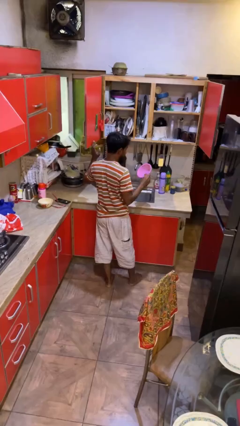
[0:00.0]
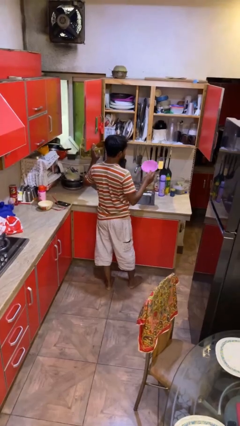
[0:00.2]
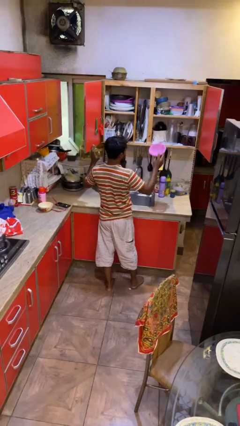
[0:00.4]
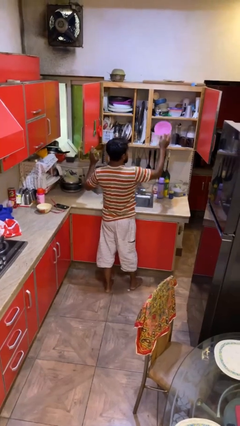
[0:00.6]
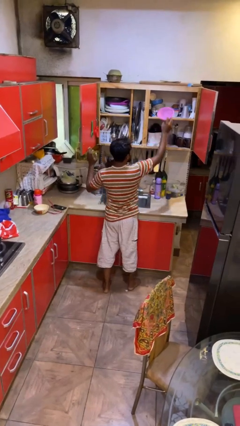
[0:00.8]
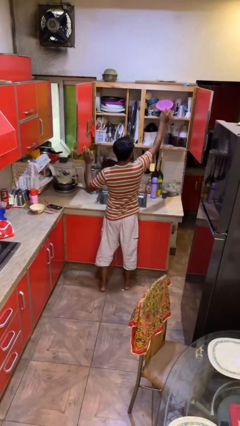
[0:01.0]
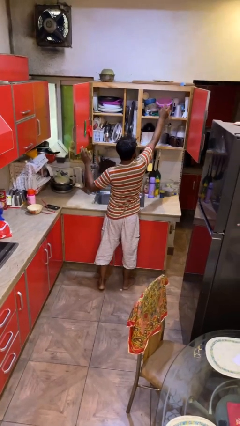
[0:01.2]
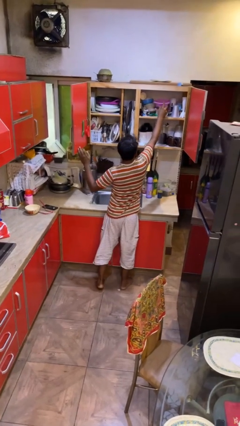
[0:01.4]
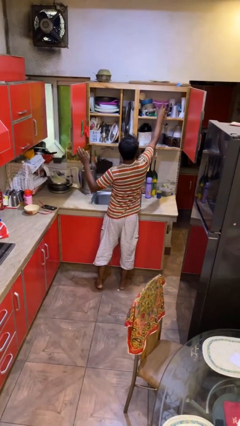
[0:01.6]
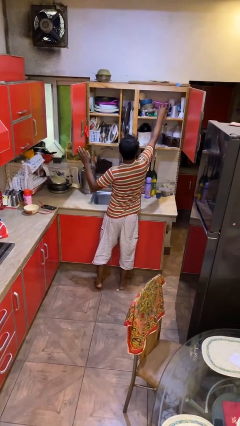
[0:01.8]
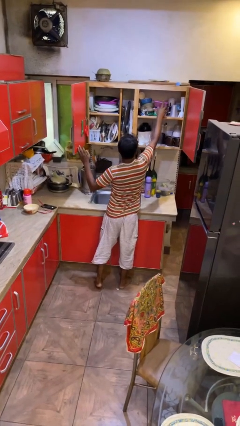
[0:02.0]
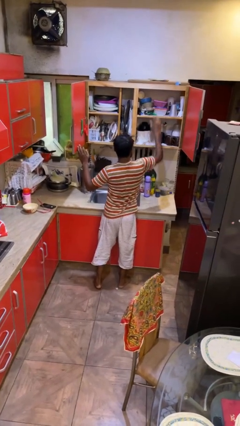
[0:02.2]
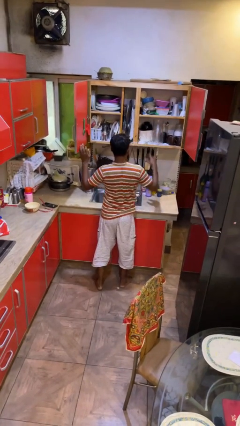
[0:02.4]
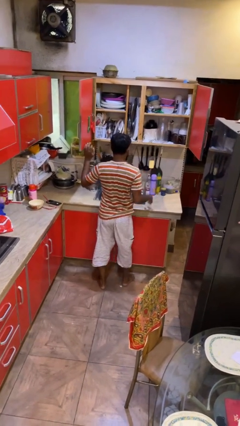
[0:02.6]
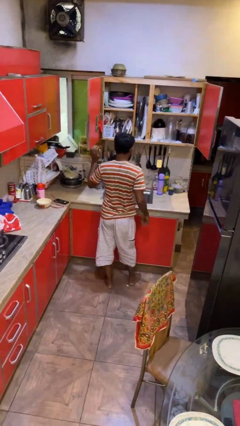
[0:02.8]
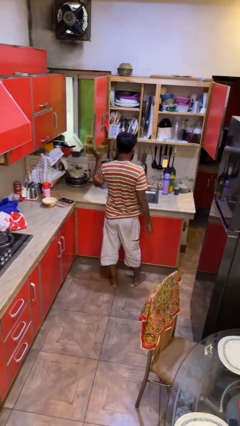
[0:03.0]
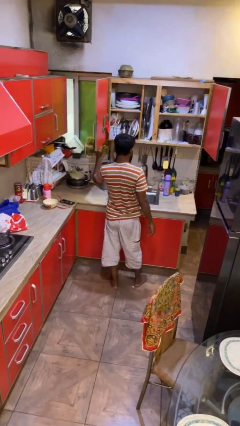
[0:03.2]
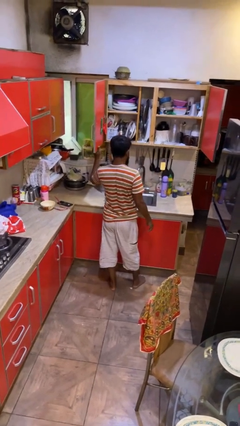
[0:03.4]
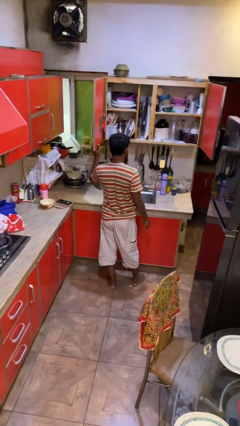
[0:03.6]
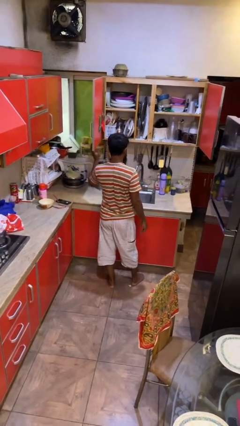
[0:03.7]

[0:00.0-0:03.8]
person puts down object into cabinet

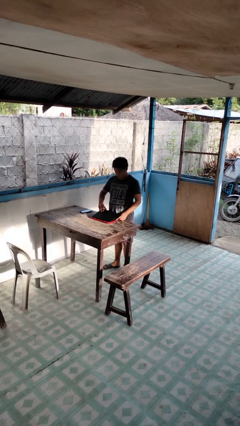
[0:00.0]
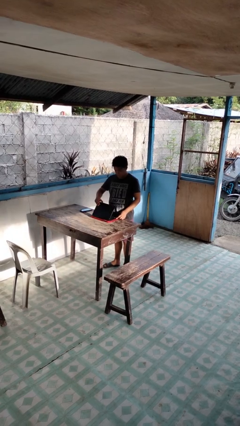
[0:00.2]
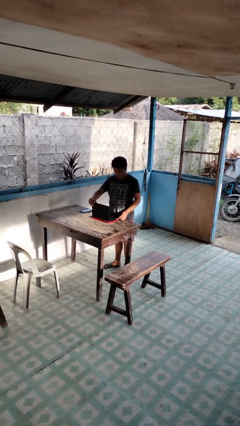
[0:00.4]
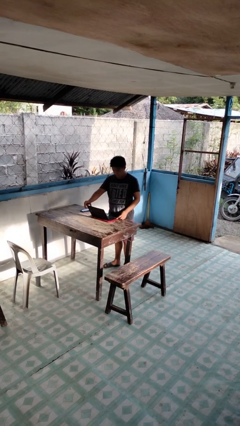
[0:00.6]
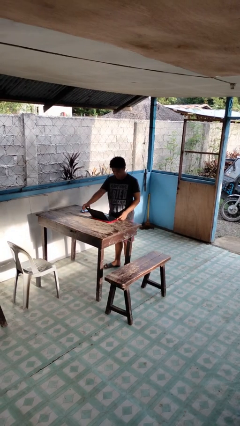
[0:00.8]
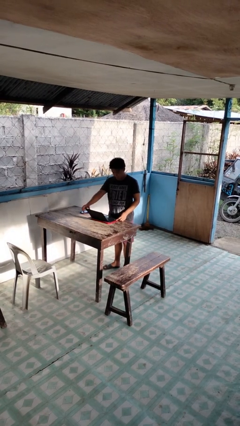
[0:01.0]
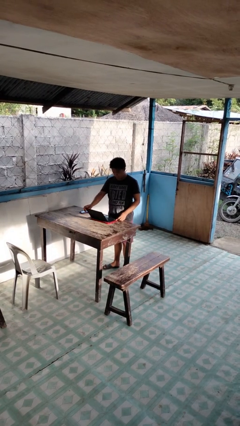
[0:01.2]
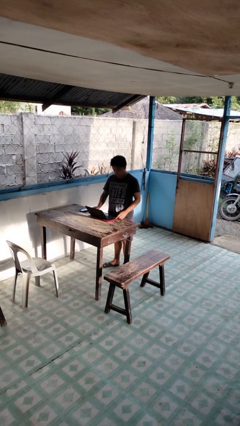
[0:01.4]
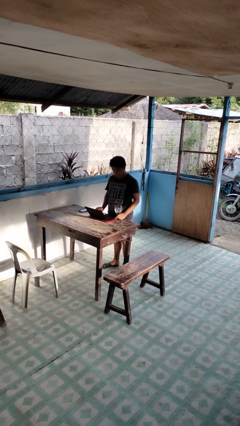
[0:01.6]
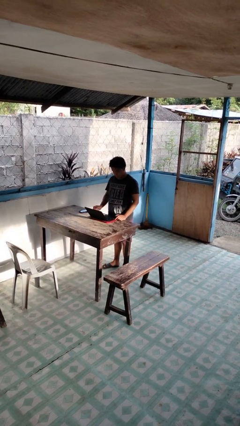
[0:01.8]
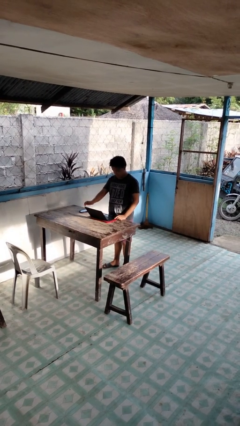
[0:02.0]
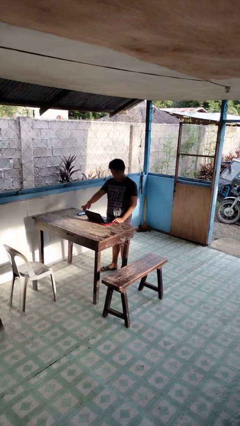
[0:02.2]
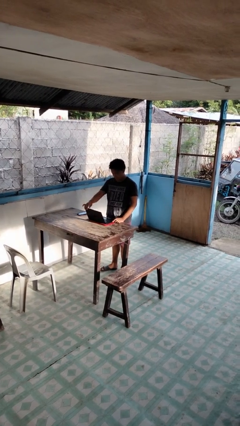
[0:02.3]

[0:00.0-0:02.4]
person opens laptop

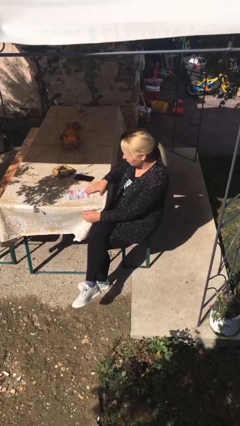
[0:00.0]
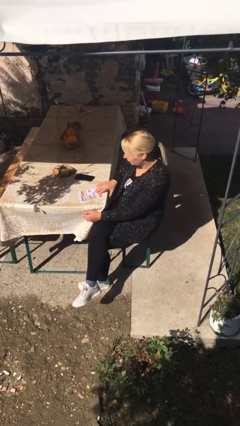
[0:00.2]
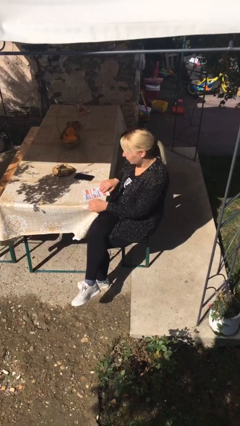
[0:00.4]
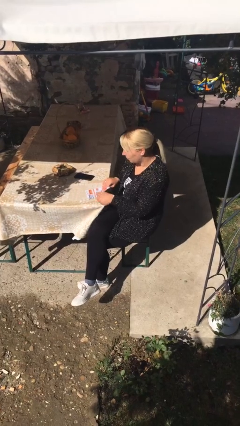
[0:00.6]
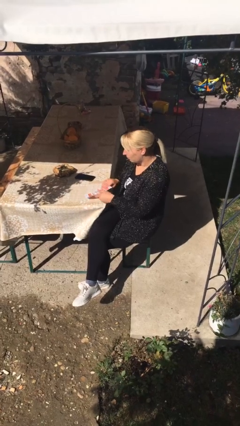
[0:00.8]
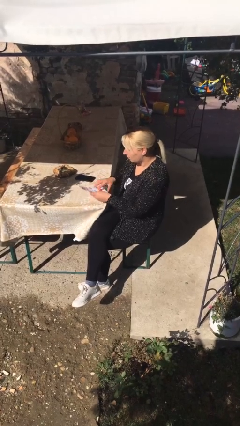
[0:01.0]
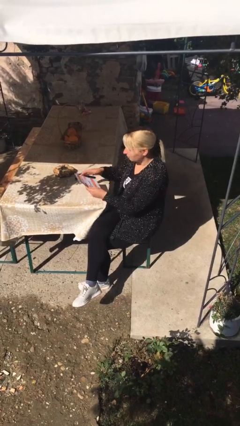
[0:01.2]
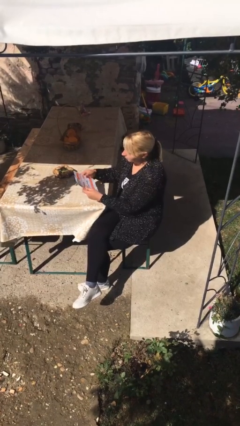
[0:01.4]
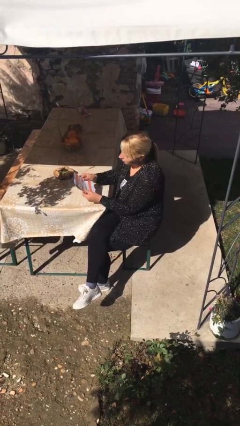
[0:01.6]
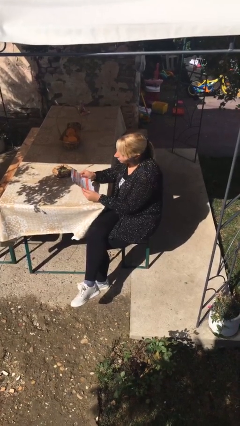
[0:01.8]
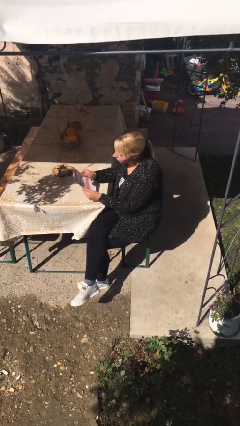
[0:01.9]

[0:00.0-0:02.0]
person picks up object from table

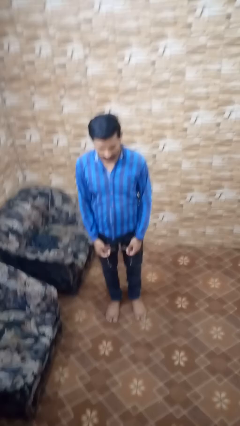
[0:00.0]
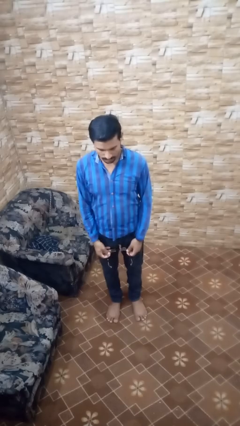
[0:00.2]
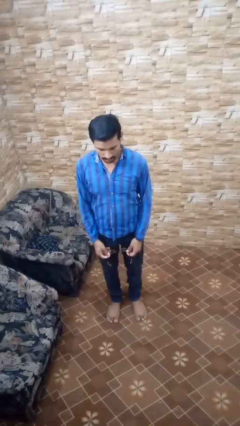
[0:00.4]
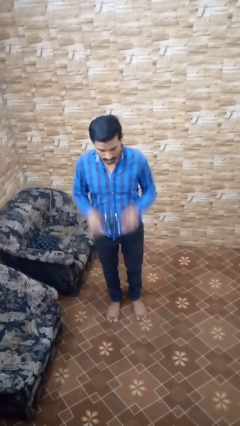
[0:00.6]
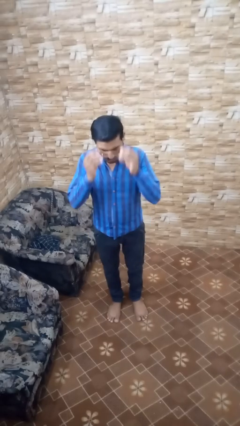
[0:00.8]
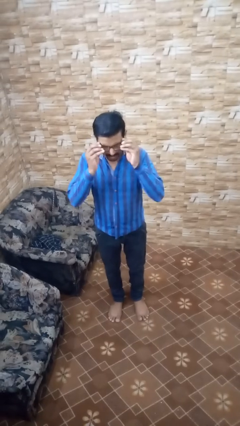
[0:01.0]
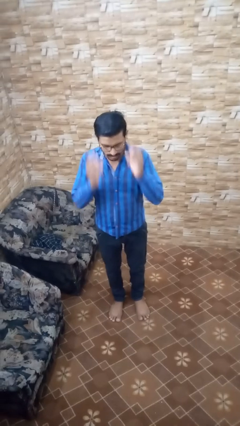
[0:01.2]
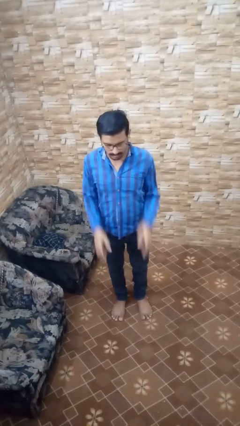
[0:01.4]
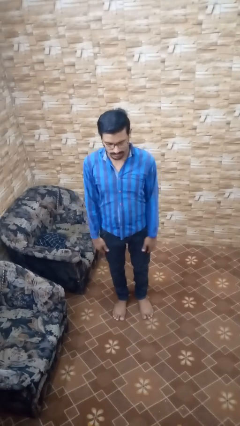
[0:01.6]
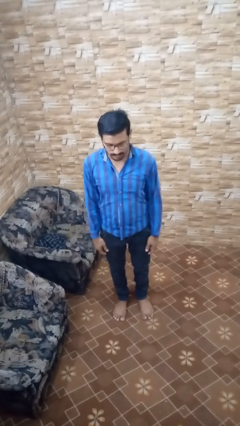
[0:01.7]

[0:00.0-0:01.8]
person puts on glasses

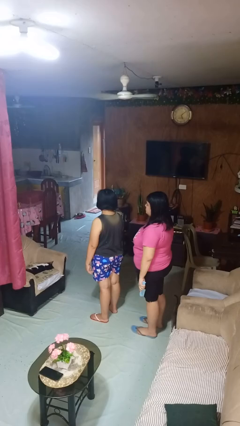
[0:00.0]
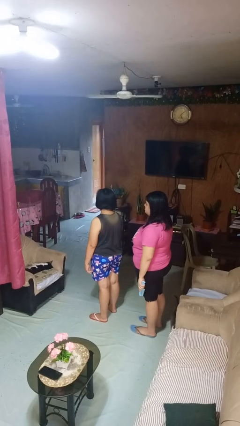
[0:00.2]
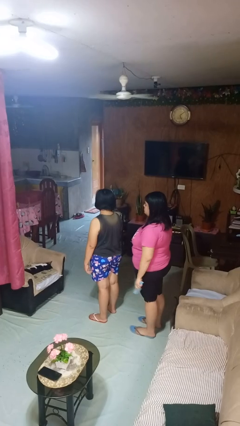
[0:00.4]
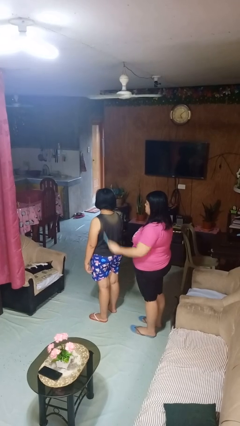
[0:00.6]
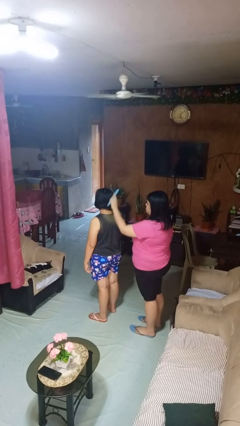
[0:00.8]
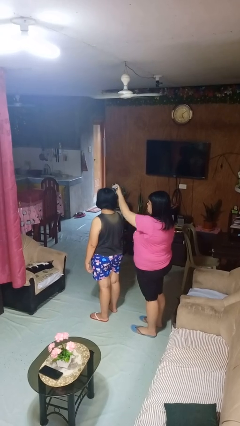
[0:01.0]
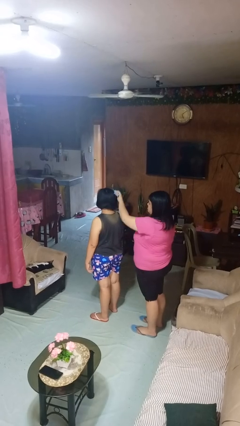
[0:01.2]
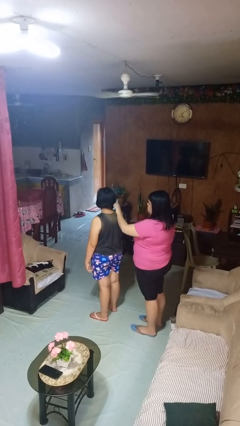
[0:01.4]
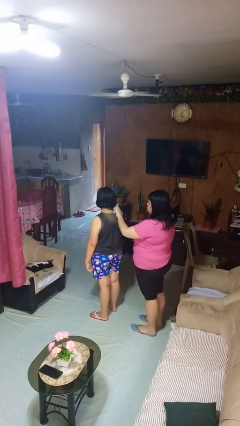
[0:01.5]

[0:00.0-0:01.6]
person brushes hair of person

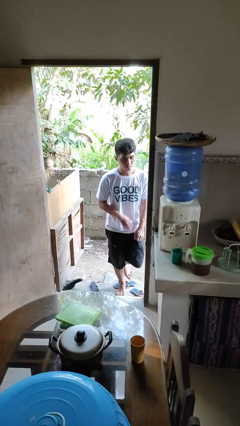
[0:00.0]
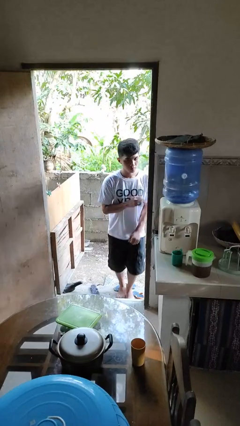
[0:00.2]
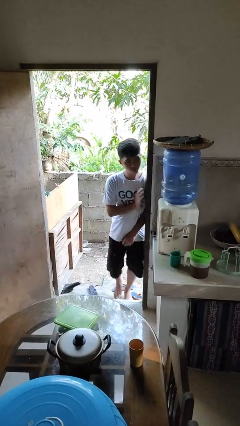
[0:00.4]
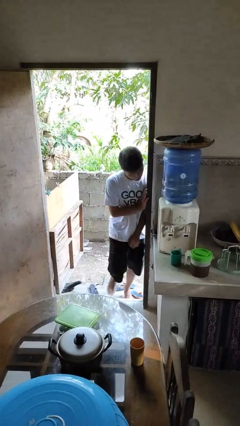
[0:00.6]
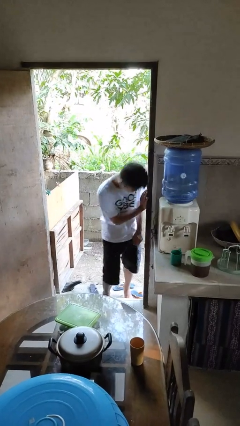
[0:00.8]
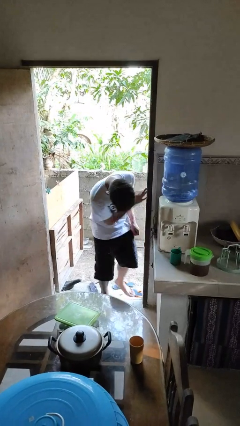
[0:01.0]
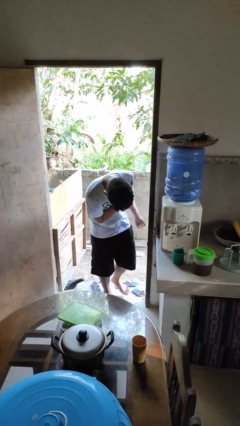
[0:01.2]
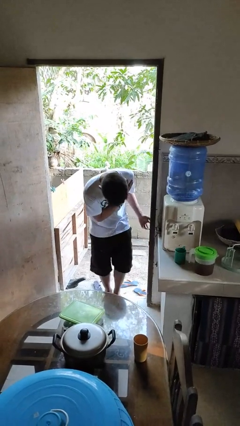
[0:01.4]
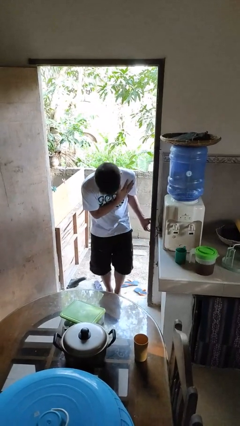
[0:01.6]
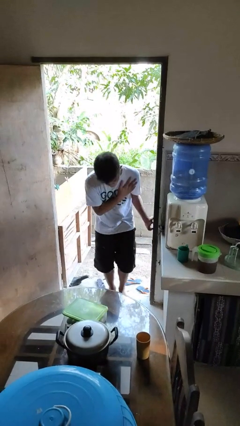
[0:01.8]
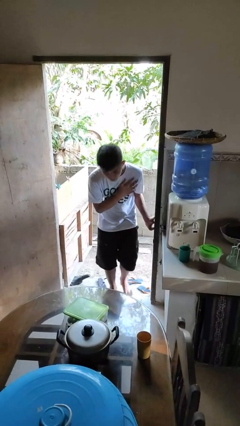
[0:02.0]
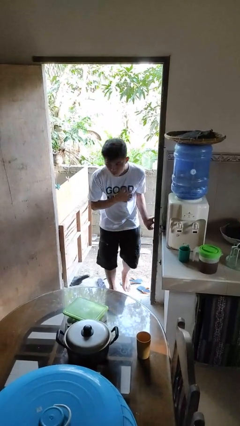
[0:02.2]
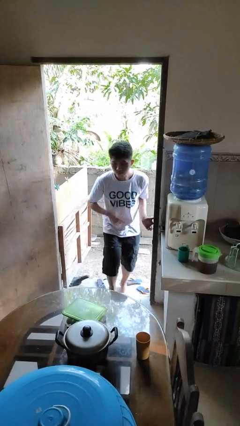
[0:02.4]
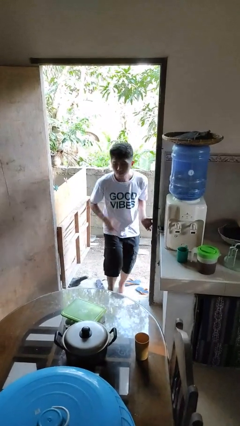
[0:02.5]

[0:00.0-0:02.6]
person bumps into wall

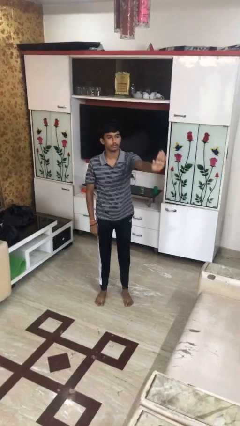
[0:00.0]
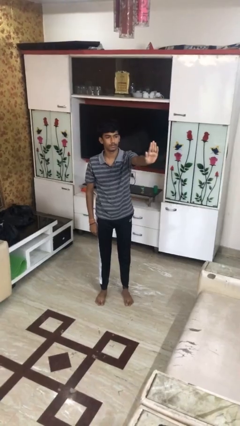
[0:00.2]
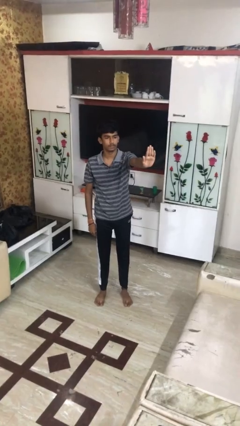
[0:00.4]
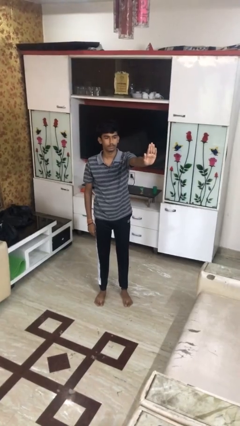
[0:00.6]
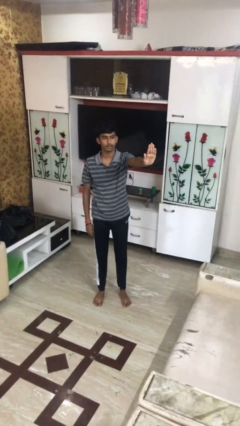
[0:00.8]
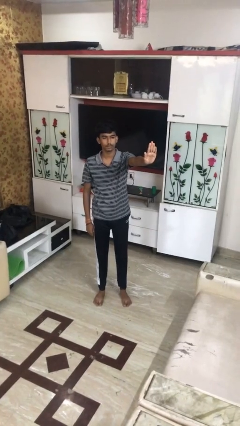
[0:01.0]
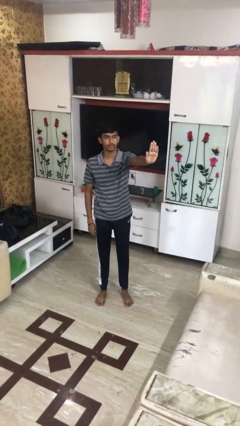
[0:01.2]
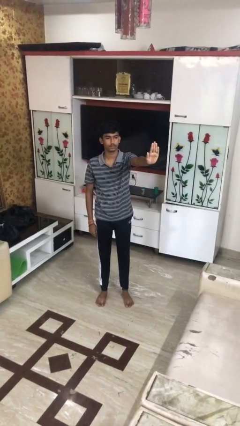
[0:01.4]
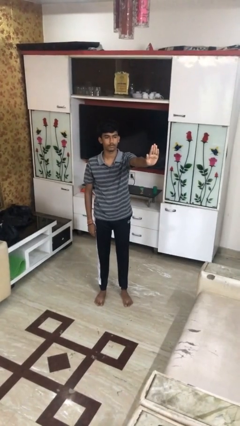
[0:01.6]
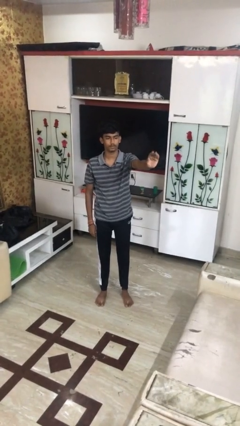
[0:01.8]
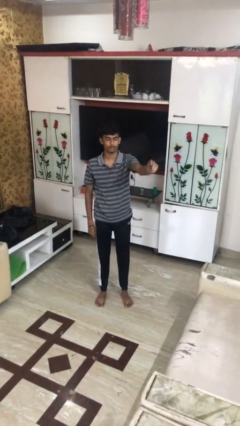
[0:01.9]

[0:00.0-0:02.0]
person gestures stop

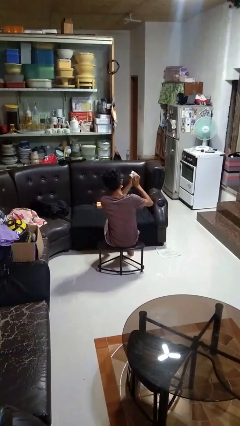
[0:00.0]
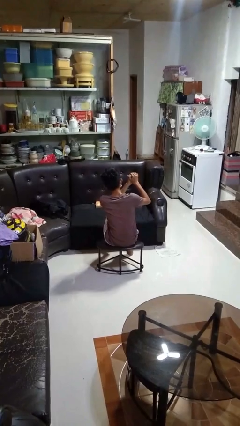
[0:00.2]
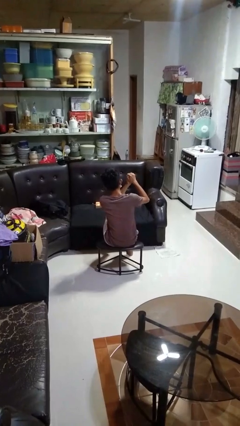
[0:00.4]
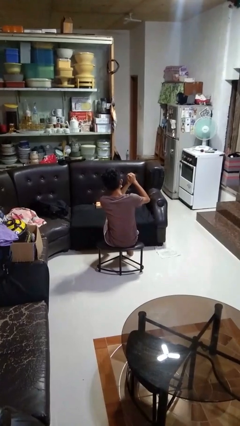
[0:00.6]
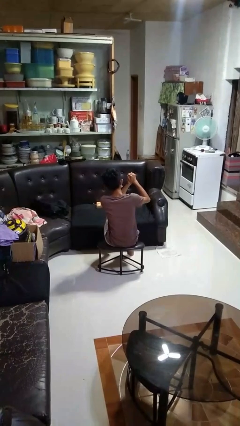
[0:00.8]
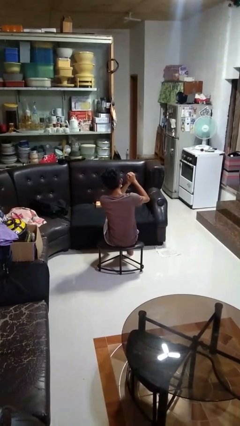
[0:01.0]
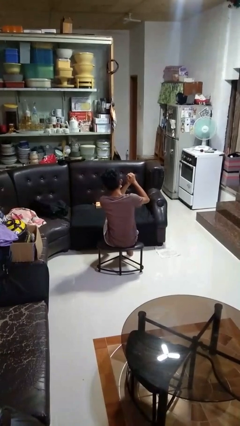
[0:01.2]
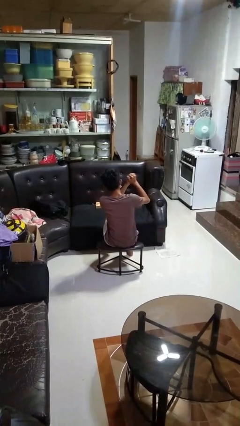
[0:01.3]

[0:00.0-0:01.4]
person crumples paper
